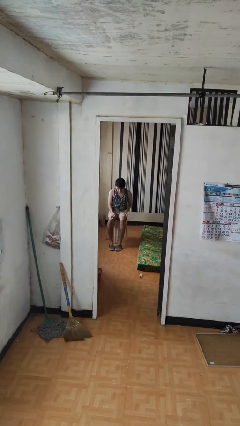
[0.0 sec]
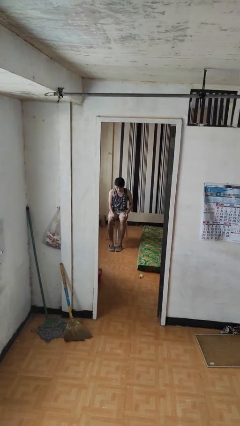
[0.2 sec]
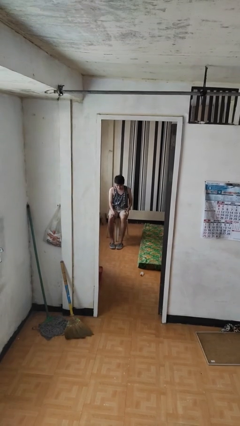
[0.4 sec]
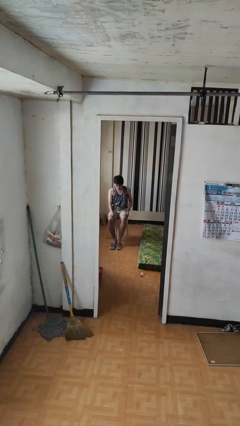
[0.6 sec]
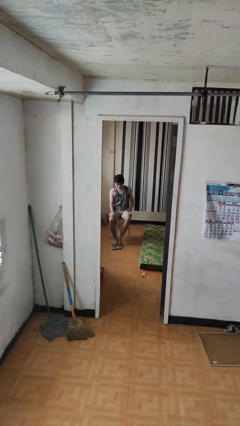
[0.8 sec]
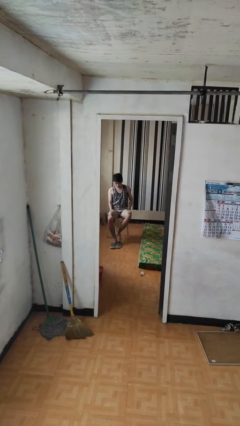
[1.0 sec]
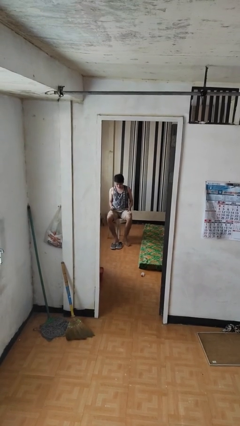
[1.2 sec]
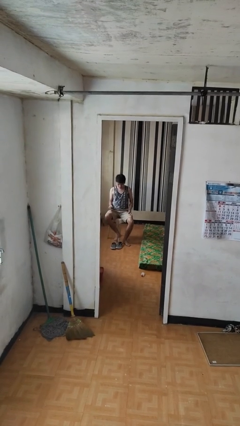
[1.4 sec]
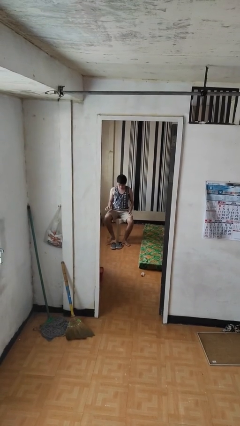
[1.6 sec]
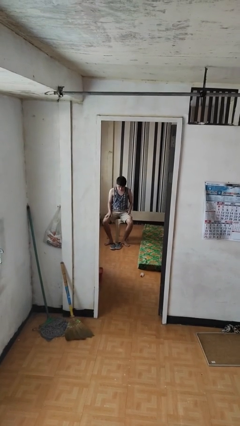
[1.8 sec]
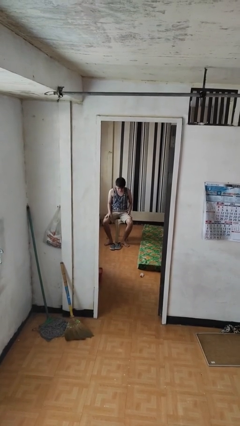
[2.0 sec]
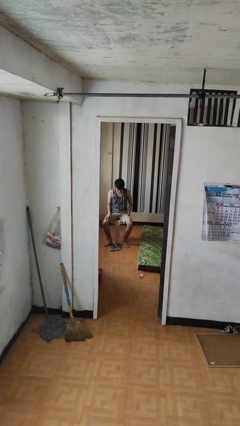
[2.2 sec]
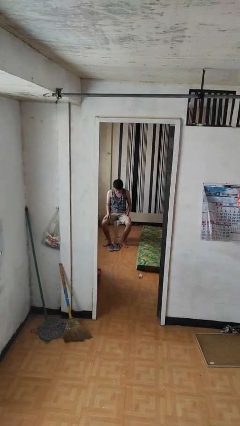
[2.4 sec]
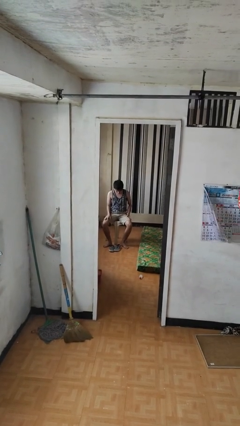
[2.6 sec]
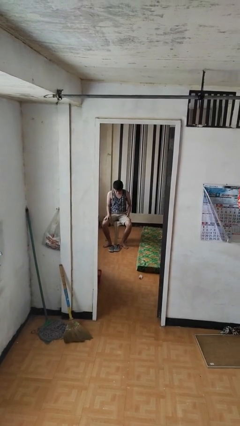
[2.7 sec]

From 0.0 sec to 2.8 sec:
person takes off shoes

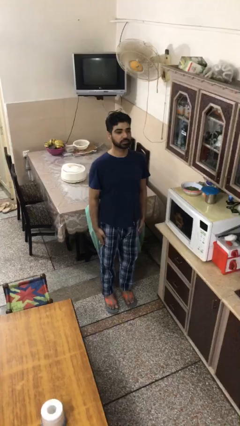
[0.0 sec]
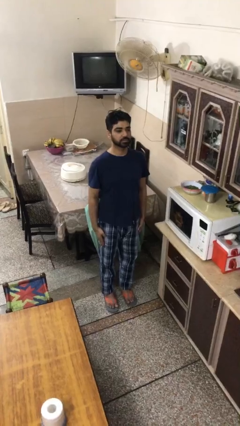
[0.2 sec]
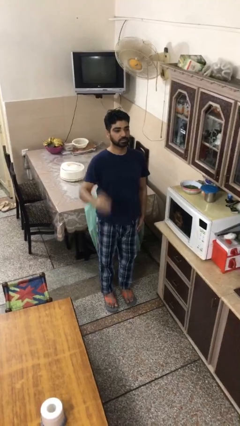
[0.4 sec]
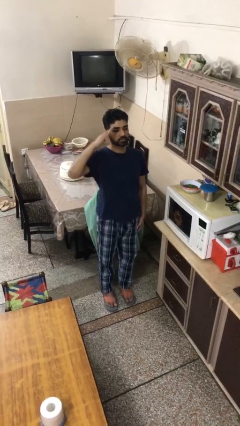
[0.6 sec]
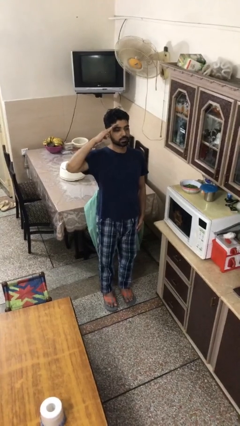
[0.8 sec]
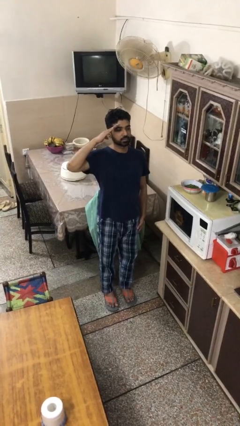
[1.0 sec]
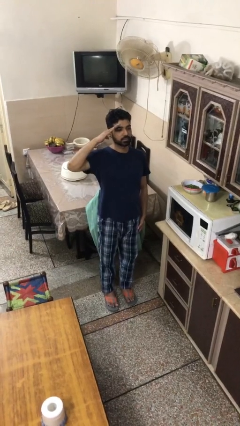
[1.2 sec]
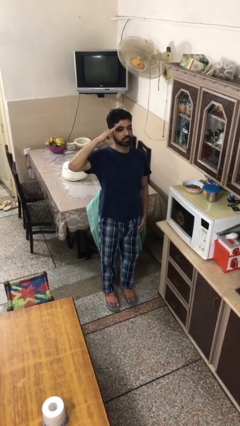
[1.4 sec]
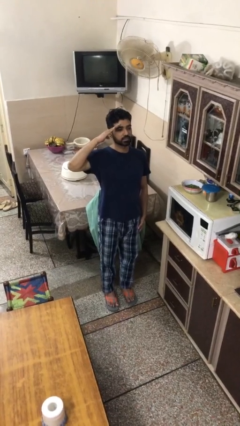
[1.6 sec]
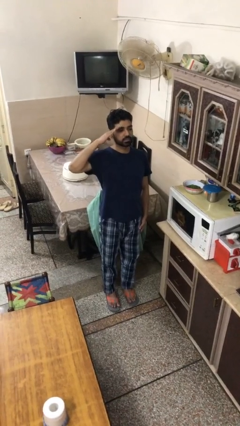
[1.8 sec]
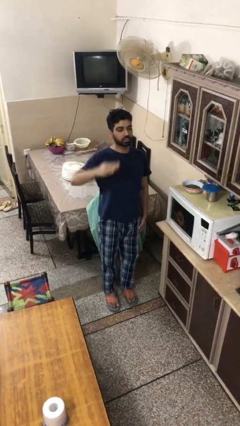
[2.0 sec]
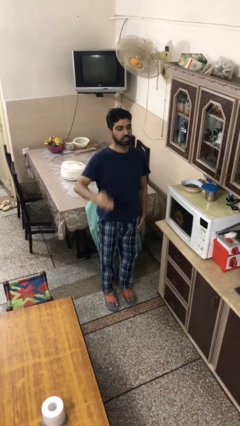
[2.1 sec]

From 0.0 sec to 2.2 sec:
person salutes

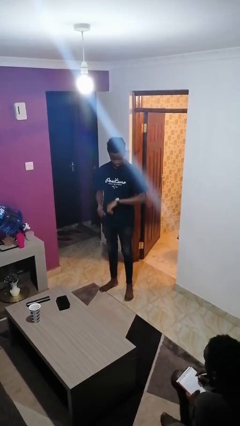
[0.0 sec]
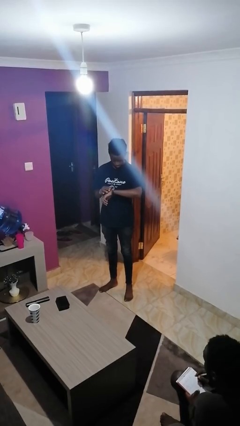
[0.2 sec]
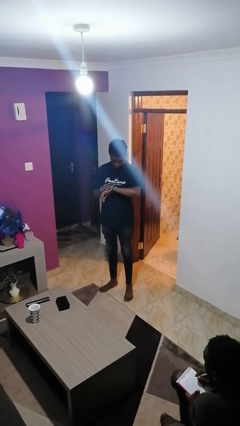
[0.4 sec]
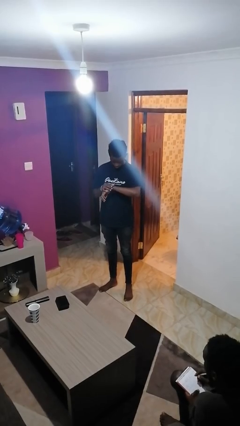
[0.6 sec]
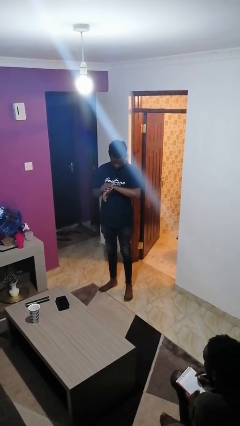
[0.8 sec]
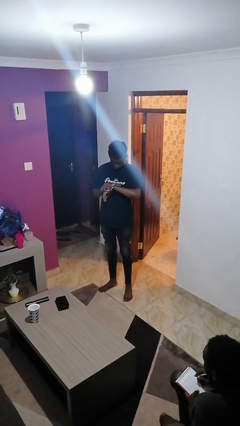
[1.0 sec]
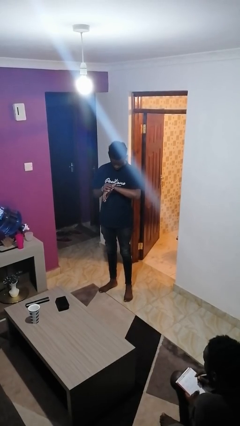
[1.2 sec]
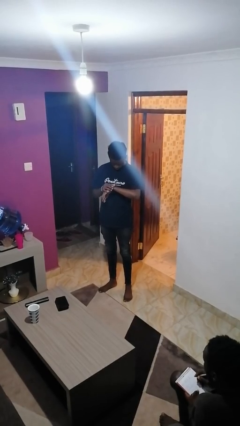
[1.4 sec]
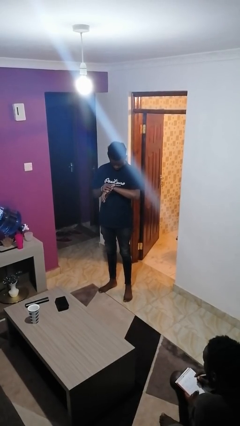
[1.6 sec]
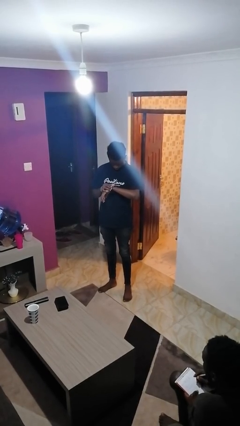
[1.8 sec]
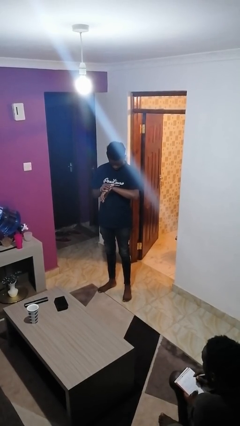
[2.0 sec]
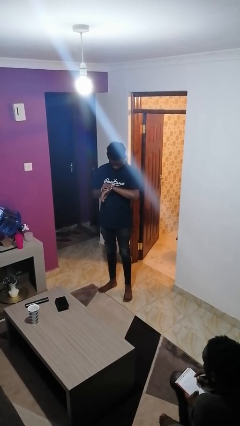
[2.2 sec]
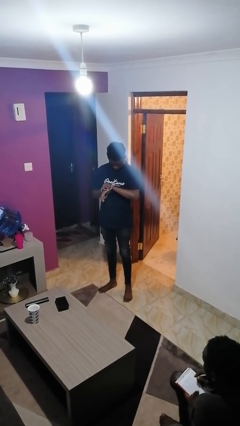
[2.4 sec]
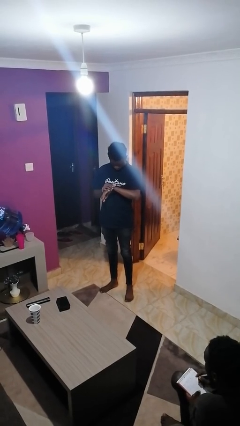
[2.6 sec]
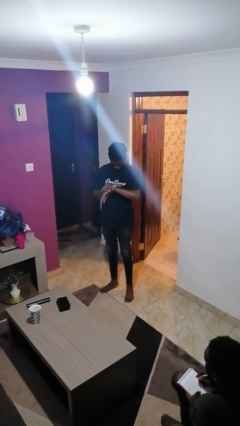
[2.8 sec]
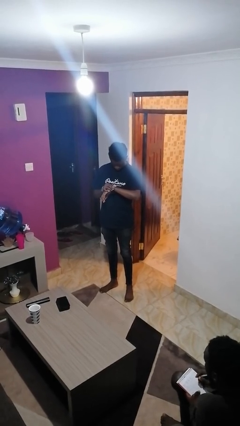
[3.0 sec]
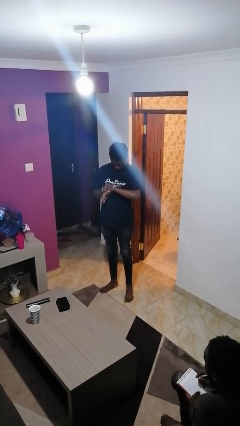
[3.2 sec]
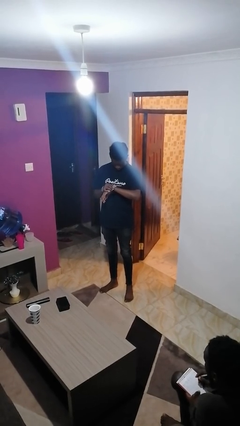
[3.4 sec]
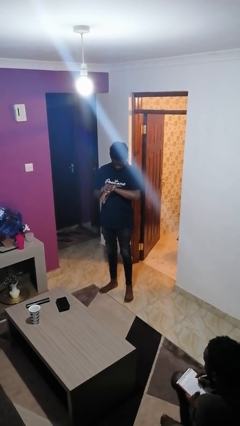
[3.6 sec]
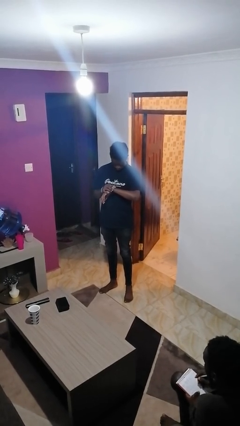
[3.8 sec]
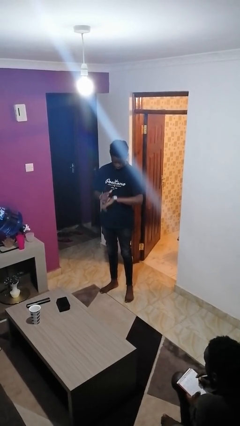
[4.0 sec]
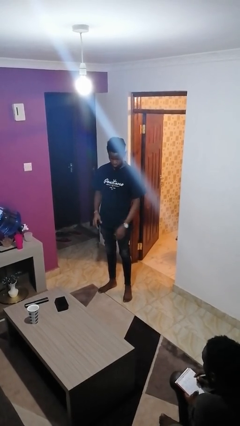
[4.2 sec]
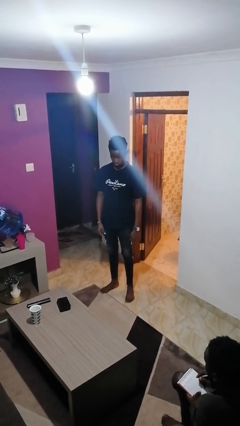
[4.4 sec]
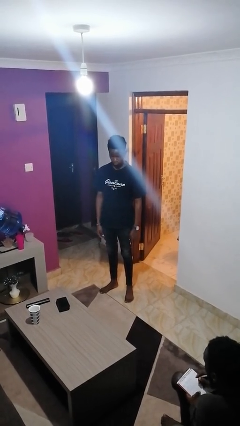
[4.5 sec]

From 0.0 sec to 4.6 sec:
person looks at wristwatch

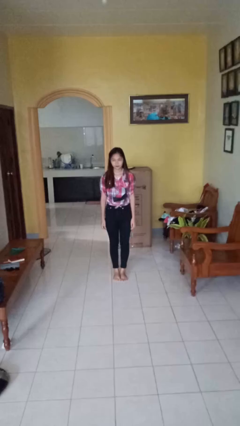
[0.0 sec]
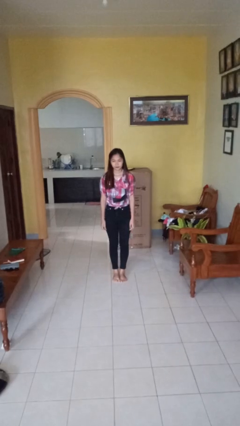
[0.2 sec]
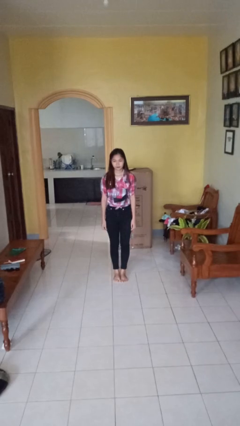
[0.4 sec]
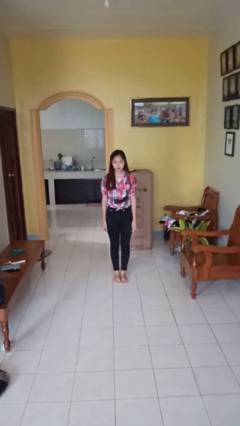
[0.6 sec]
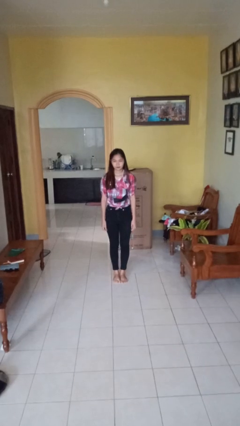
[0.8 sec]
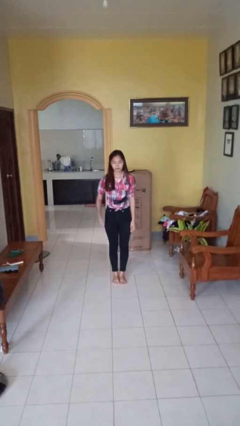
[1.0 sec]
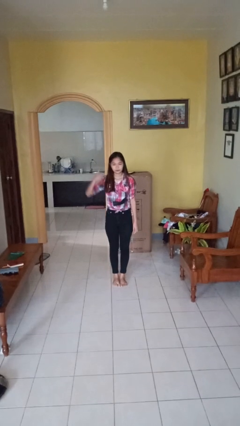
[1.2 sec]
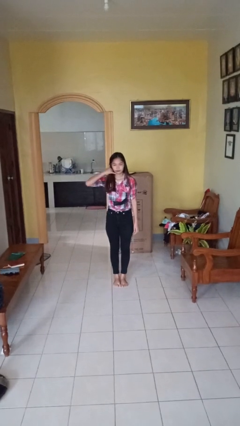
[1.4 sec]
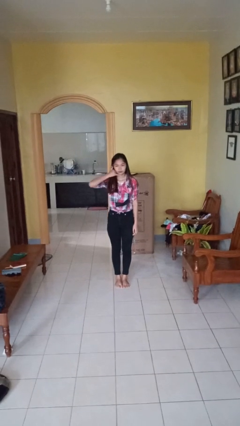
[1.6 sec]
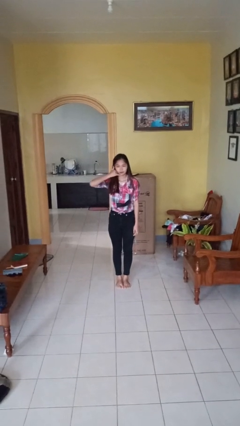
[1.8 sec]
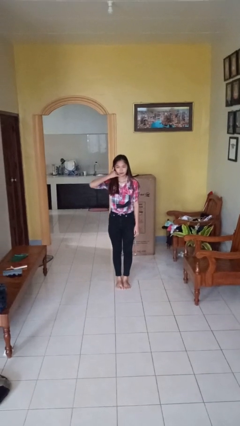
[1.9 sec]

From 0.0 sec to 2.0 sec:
person gestures call me

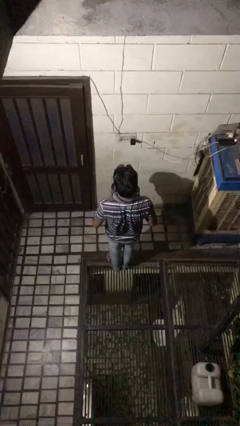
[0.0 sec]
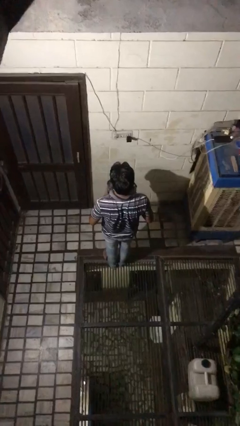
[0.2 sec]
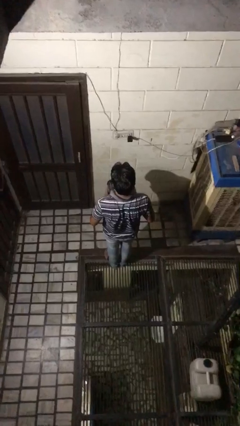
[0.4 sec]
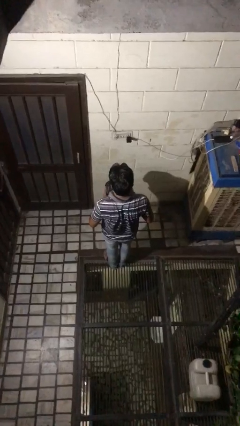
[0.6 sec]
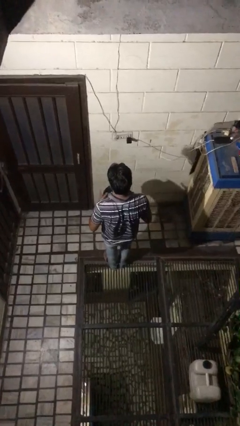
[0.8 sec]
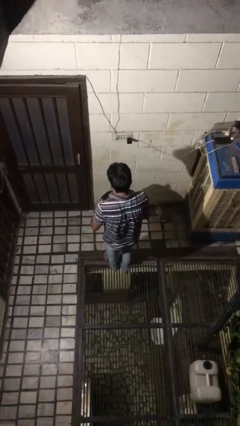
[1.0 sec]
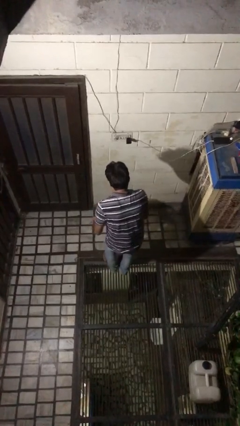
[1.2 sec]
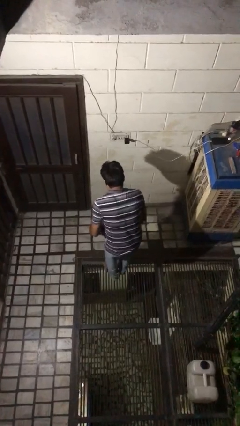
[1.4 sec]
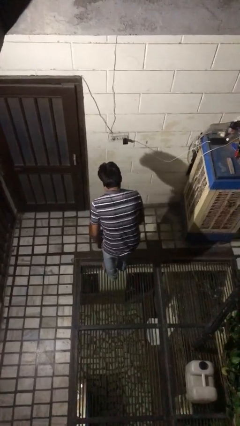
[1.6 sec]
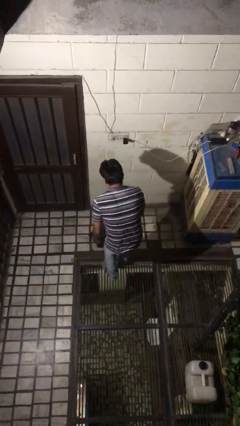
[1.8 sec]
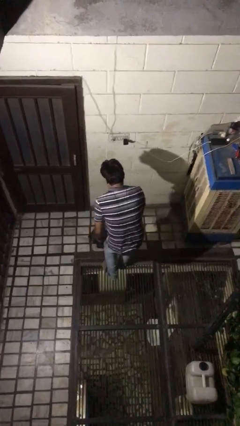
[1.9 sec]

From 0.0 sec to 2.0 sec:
person throws object to ground

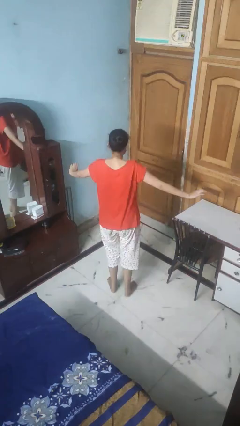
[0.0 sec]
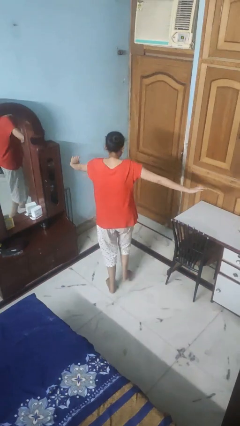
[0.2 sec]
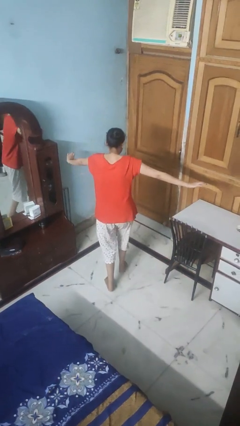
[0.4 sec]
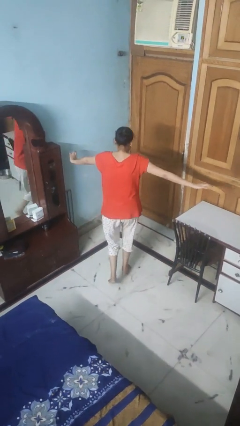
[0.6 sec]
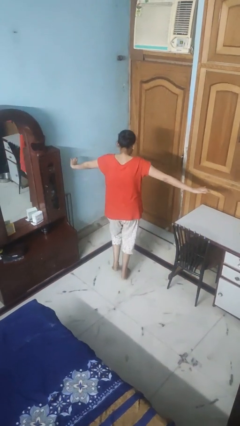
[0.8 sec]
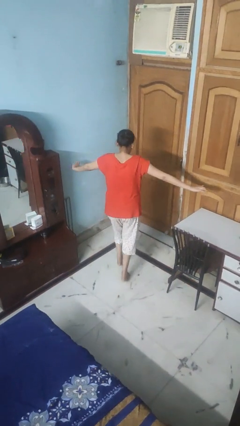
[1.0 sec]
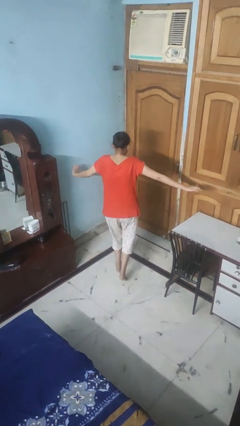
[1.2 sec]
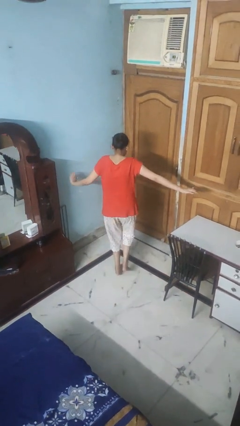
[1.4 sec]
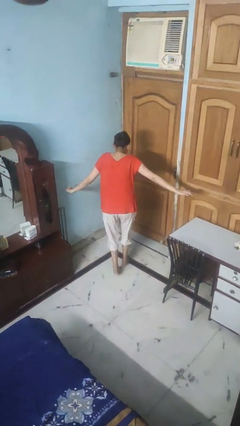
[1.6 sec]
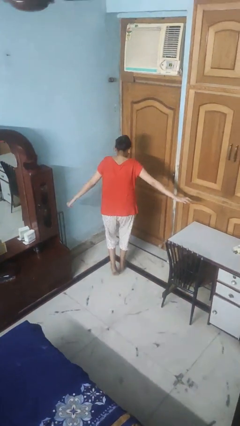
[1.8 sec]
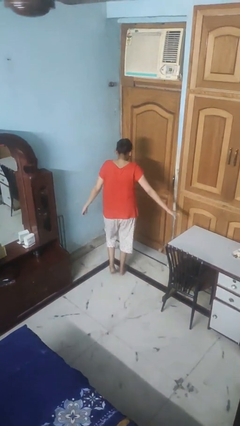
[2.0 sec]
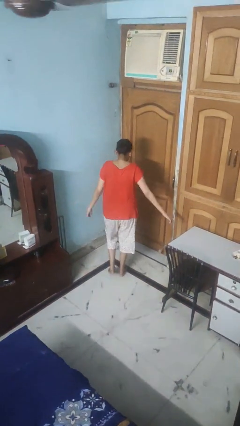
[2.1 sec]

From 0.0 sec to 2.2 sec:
person walks tiptoe

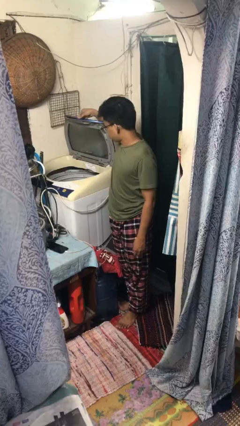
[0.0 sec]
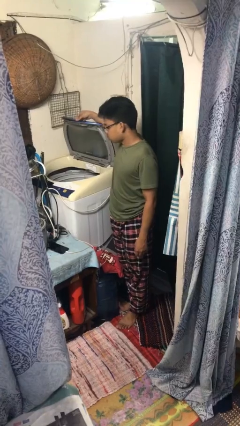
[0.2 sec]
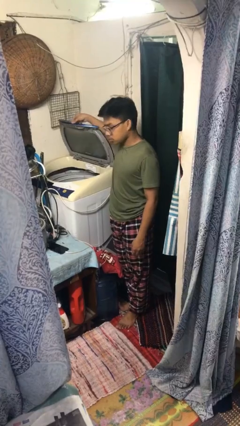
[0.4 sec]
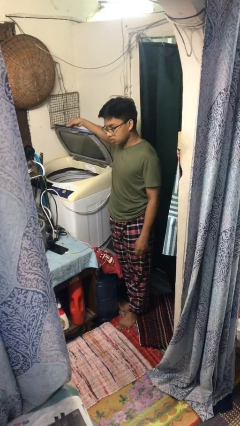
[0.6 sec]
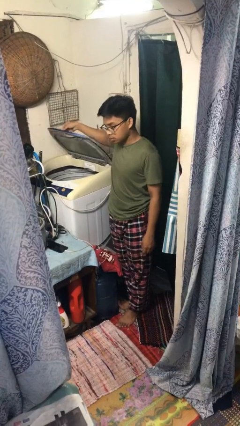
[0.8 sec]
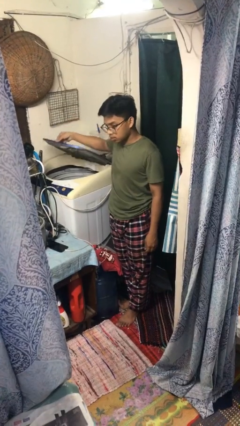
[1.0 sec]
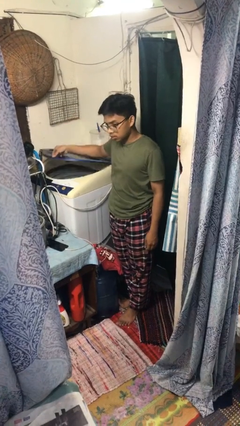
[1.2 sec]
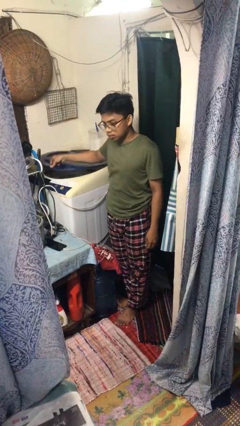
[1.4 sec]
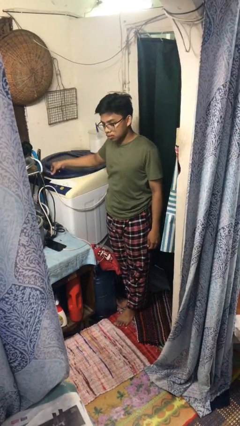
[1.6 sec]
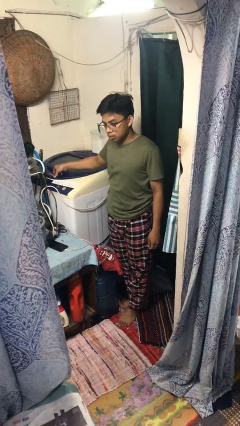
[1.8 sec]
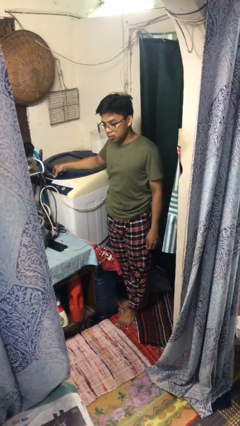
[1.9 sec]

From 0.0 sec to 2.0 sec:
person closes clothes washer
